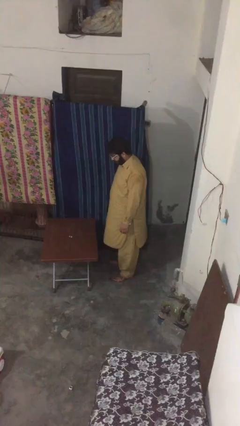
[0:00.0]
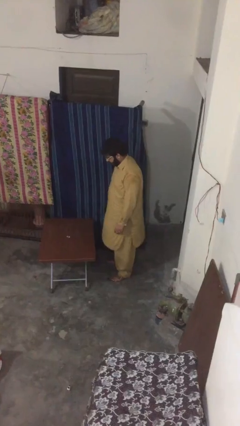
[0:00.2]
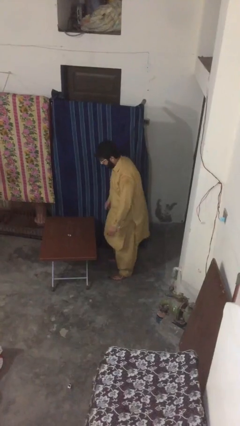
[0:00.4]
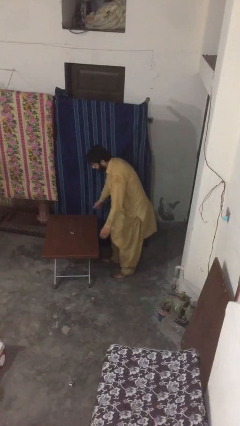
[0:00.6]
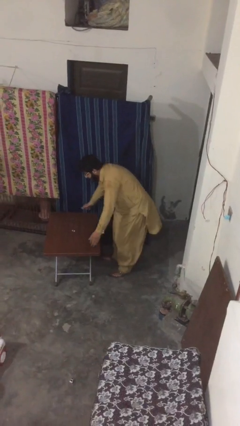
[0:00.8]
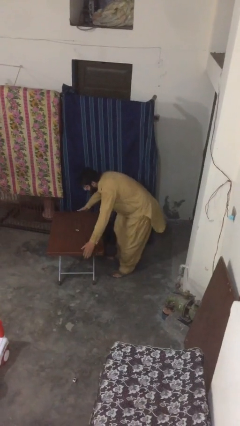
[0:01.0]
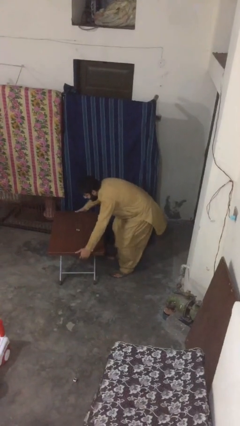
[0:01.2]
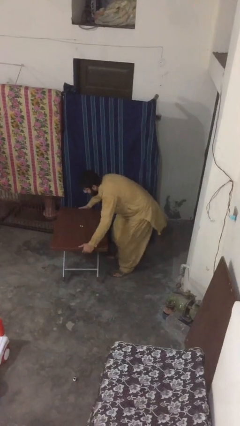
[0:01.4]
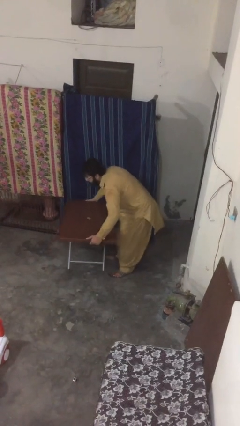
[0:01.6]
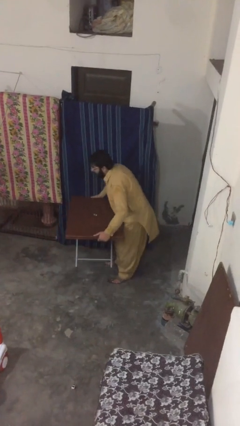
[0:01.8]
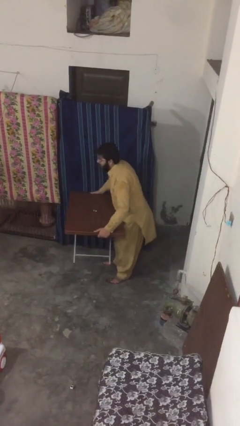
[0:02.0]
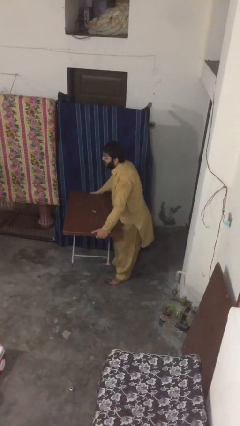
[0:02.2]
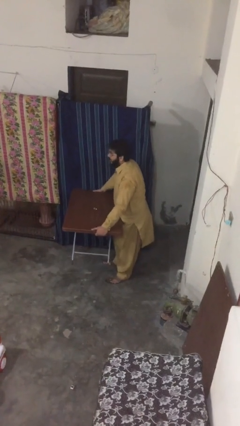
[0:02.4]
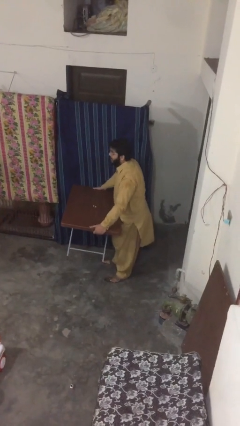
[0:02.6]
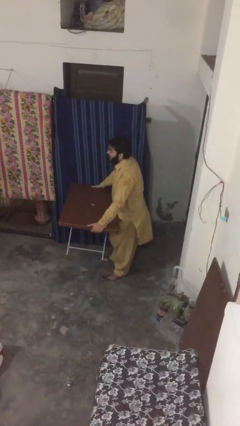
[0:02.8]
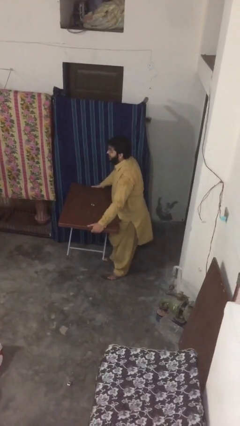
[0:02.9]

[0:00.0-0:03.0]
person picks up object from floor

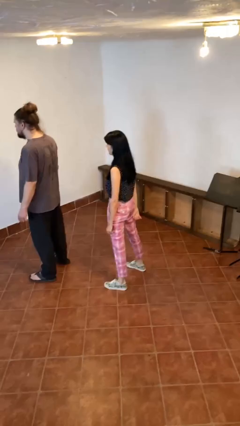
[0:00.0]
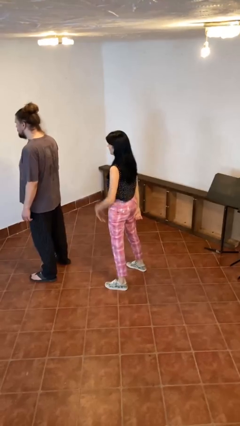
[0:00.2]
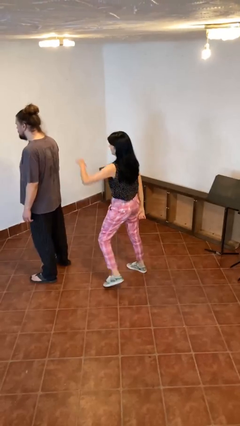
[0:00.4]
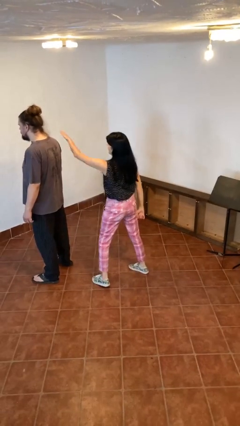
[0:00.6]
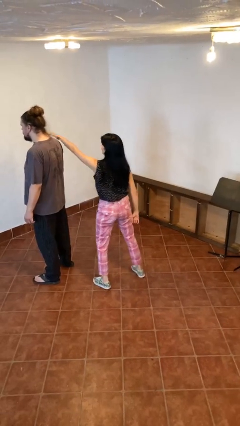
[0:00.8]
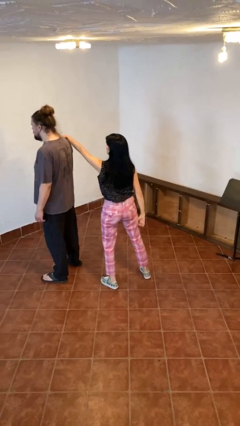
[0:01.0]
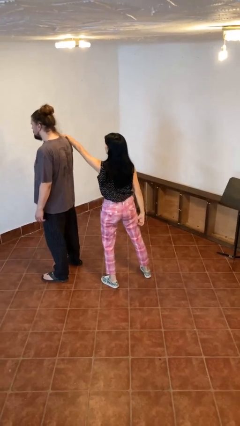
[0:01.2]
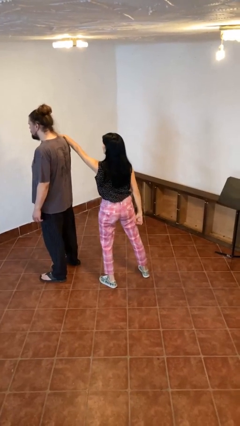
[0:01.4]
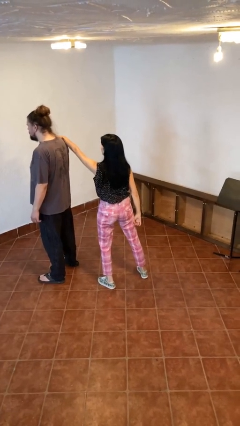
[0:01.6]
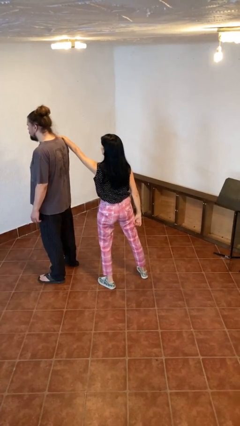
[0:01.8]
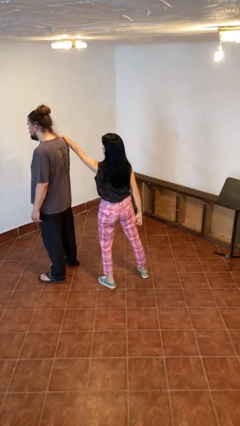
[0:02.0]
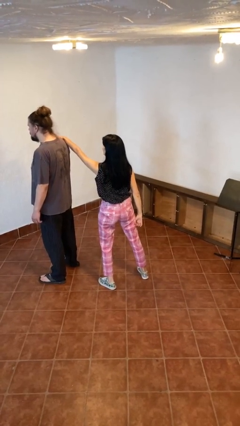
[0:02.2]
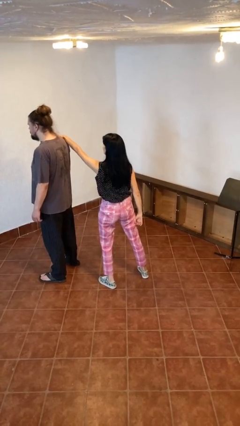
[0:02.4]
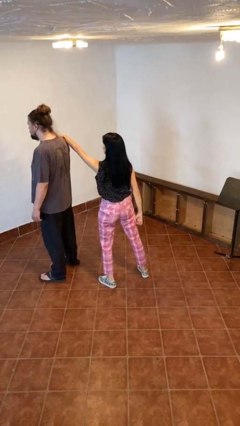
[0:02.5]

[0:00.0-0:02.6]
person grabs person by shoulder

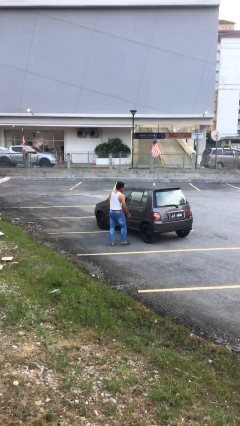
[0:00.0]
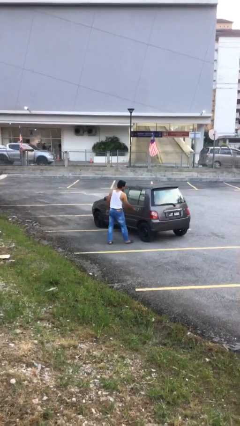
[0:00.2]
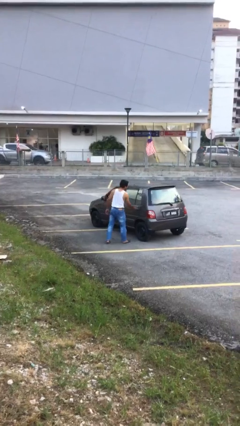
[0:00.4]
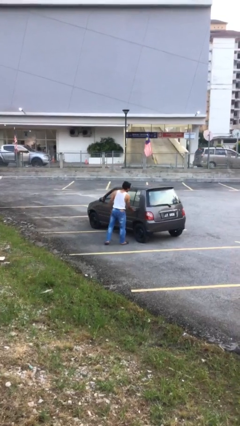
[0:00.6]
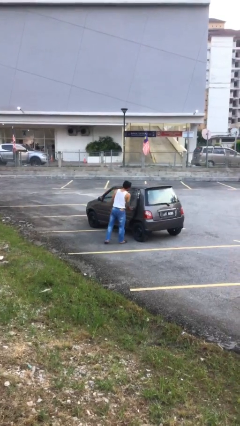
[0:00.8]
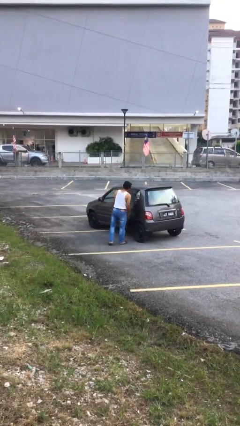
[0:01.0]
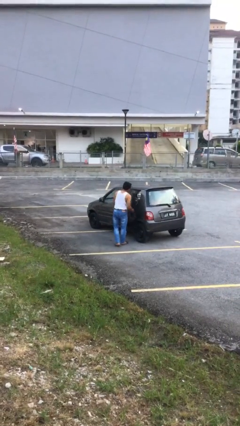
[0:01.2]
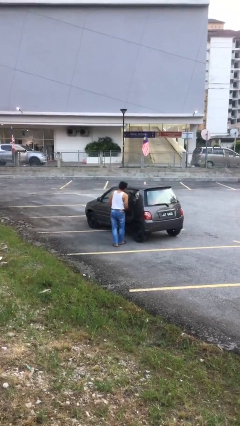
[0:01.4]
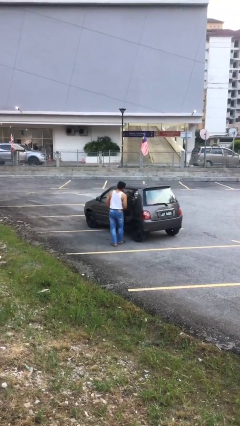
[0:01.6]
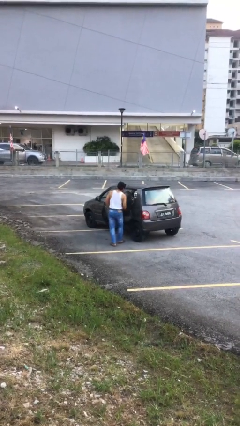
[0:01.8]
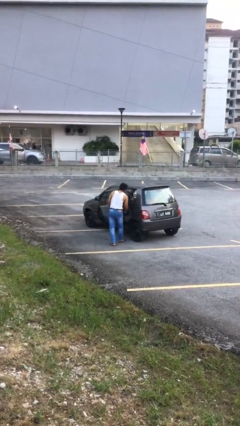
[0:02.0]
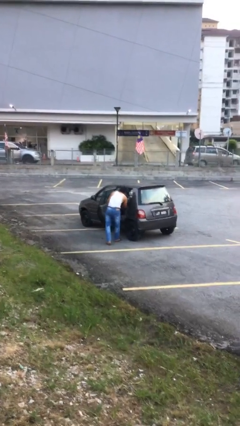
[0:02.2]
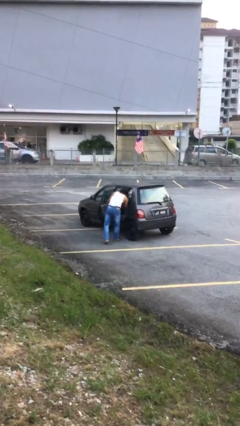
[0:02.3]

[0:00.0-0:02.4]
person opens car door

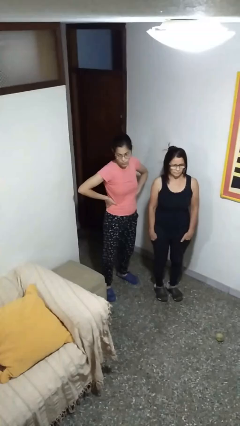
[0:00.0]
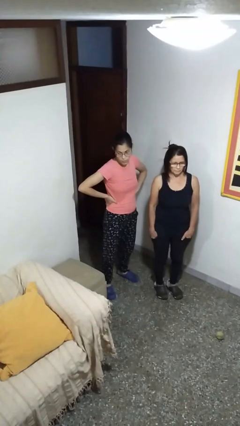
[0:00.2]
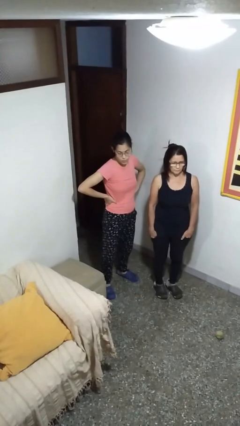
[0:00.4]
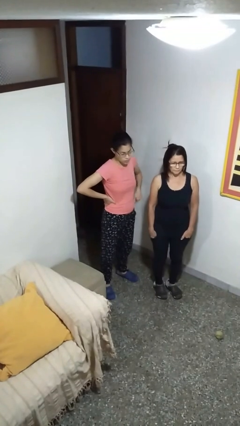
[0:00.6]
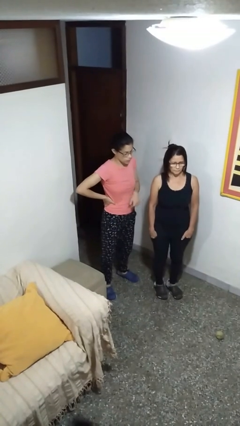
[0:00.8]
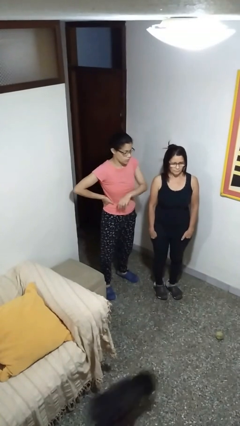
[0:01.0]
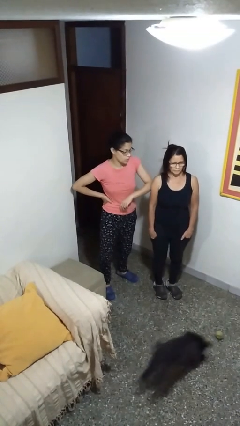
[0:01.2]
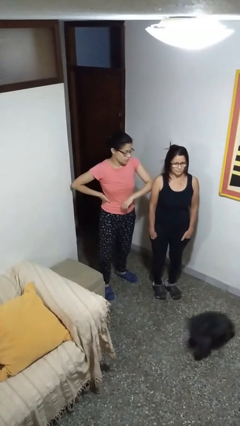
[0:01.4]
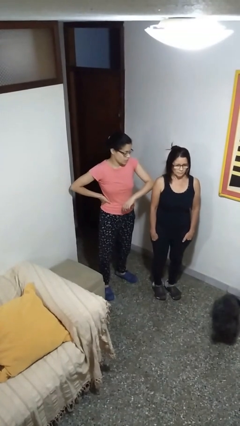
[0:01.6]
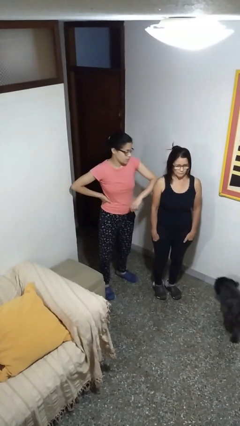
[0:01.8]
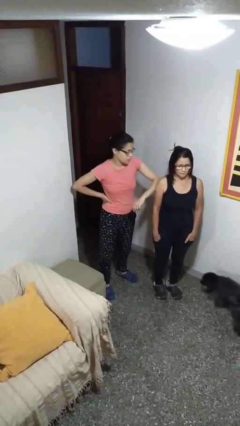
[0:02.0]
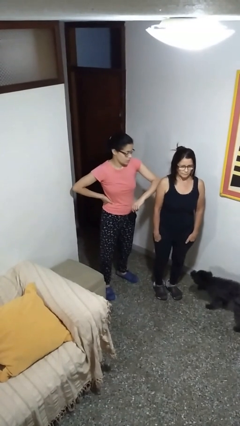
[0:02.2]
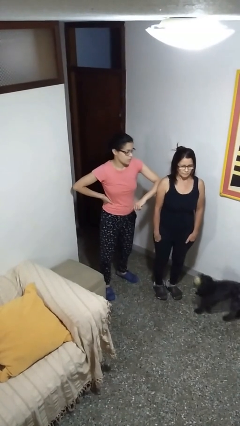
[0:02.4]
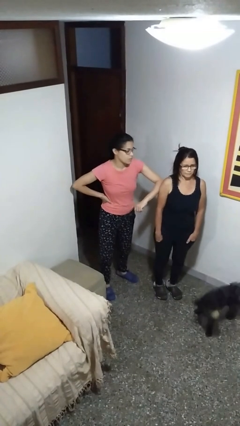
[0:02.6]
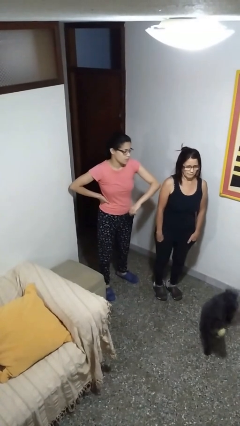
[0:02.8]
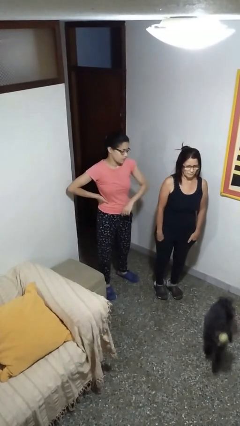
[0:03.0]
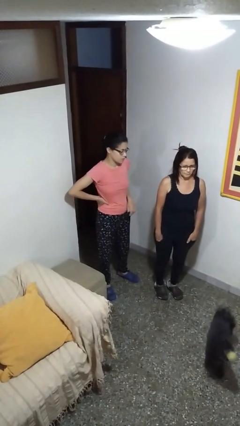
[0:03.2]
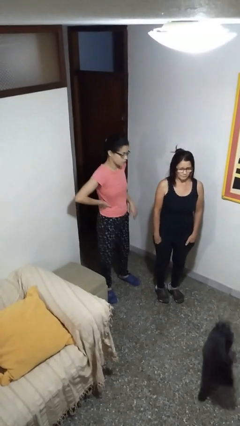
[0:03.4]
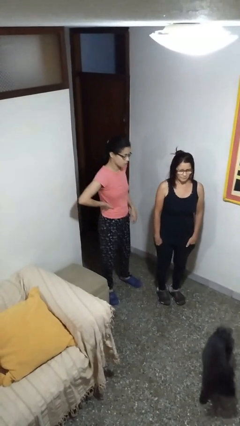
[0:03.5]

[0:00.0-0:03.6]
person nudges person with elbow

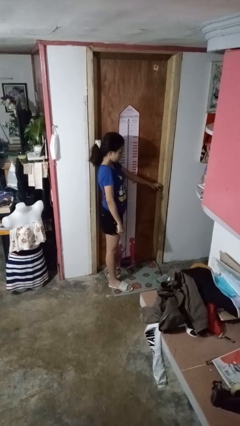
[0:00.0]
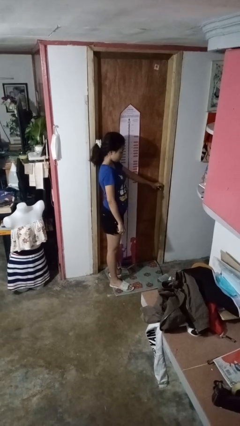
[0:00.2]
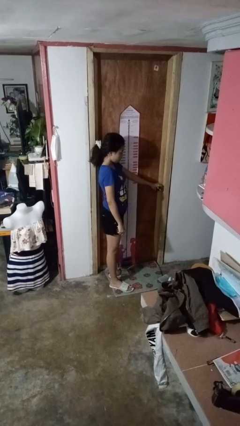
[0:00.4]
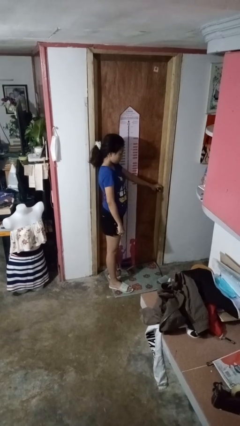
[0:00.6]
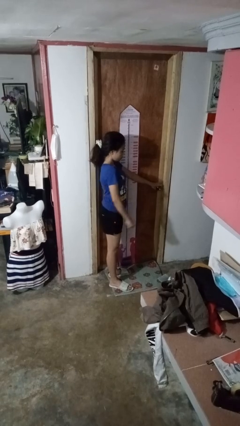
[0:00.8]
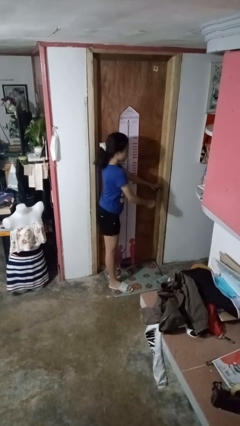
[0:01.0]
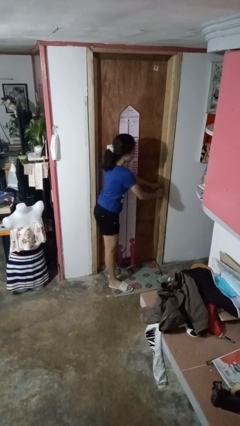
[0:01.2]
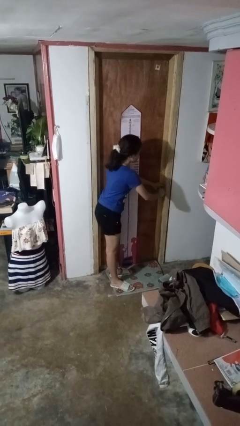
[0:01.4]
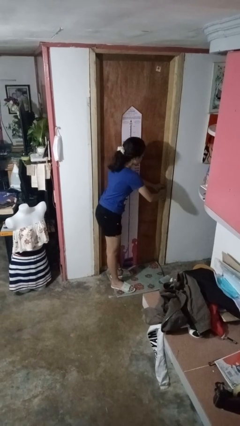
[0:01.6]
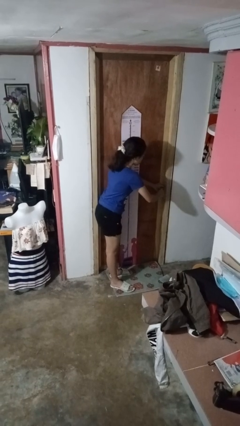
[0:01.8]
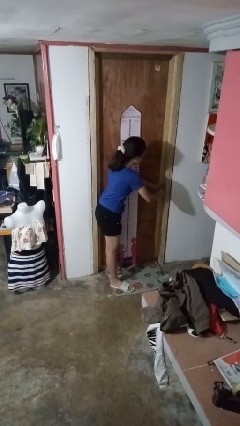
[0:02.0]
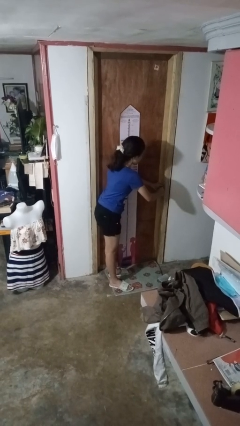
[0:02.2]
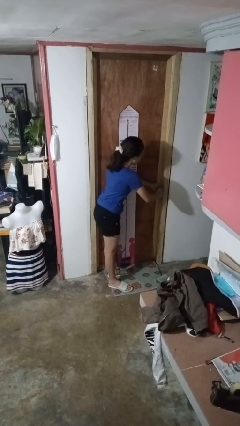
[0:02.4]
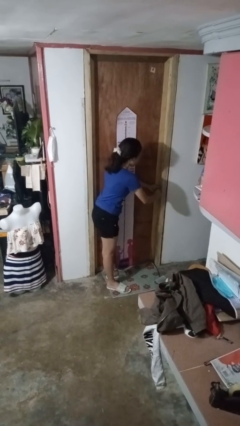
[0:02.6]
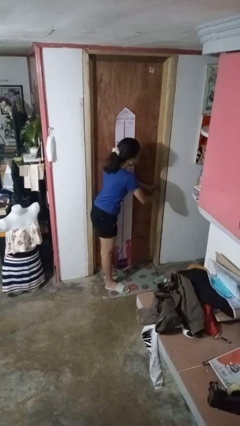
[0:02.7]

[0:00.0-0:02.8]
person unlocks door with keys

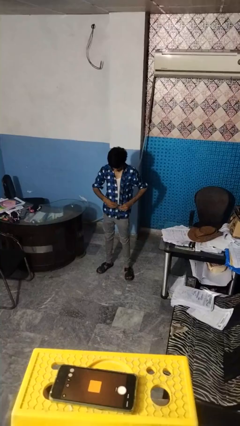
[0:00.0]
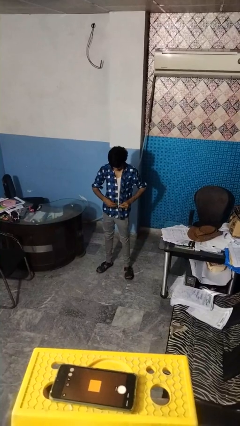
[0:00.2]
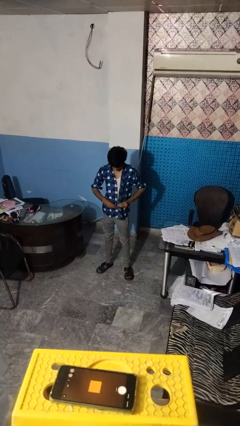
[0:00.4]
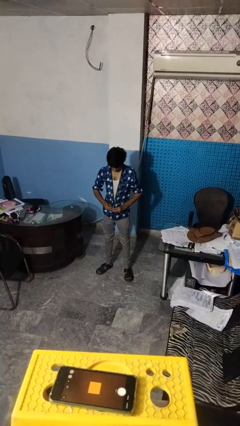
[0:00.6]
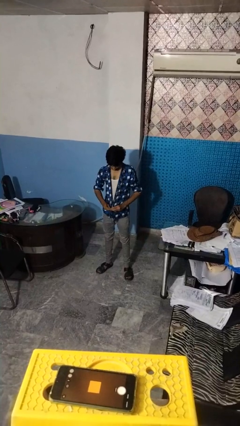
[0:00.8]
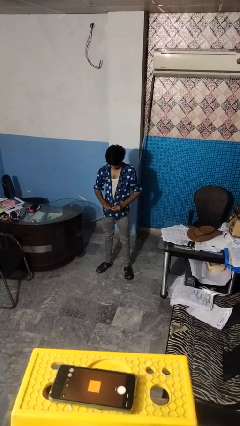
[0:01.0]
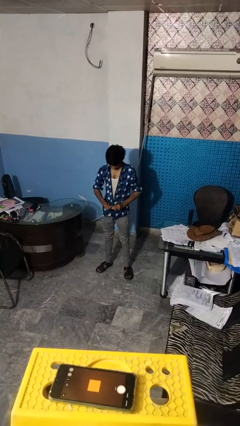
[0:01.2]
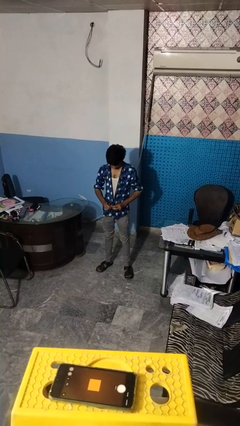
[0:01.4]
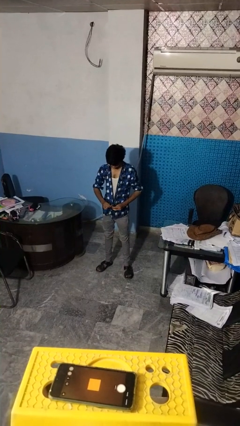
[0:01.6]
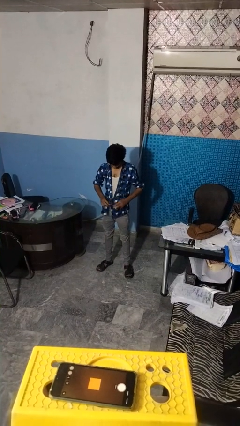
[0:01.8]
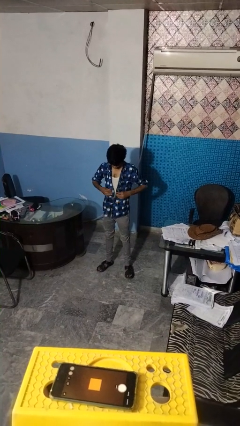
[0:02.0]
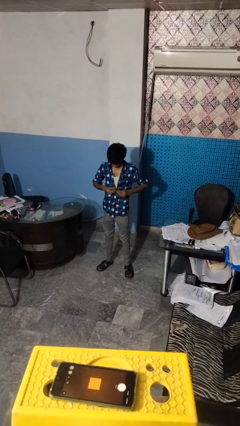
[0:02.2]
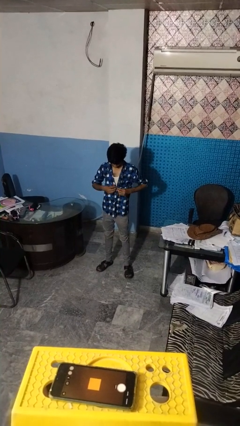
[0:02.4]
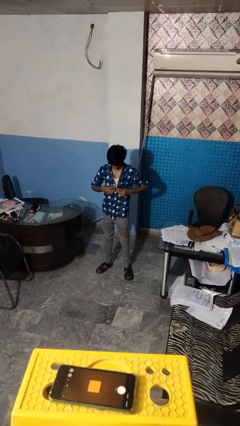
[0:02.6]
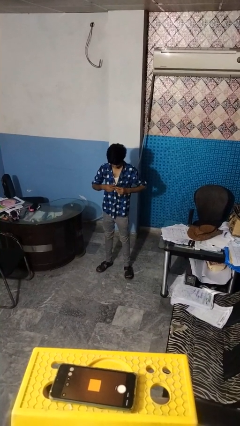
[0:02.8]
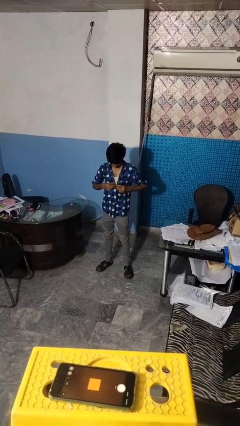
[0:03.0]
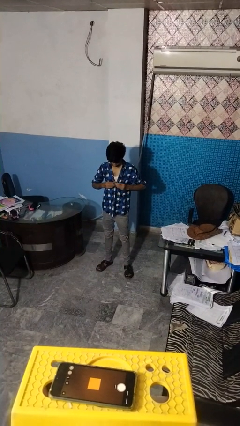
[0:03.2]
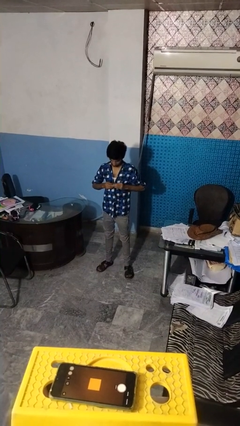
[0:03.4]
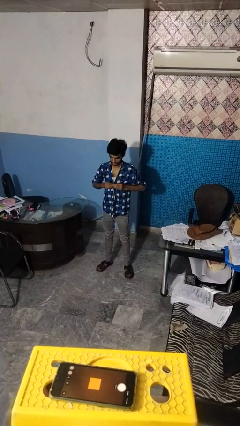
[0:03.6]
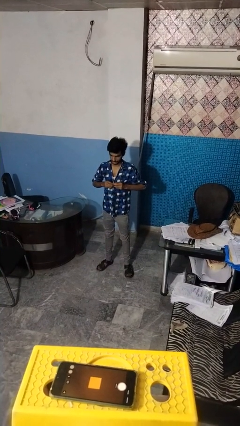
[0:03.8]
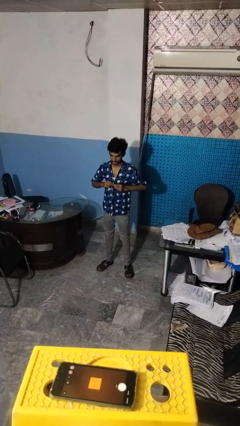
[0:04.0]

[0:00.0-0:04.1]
person buttons shirt
